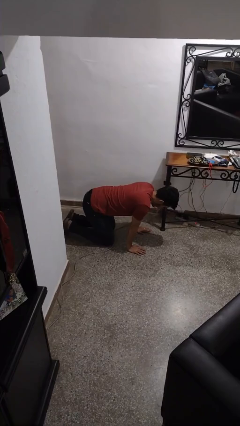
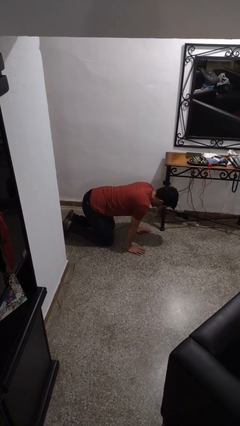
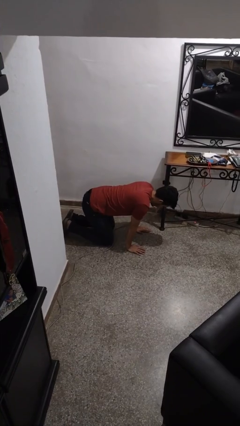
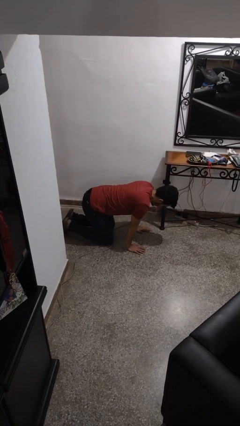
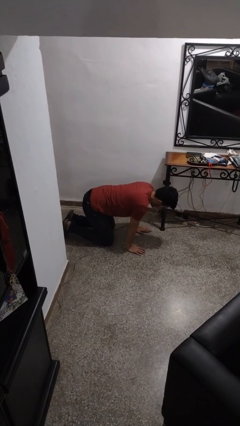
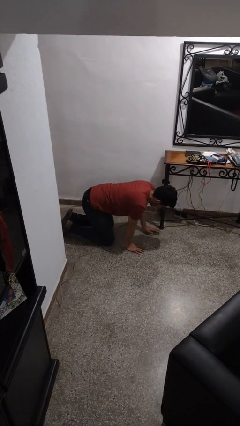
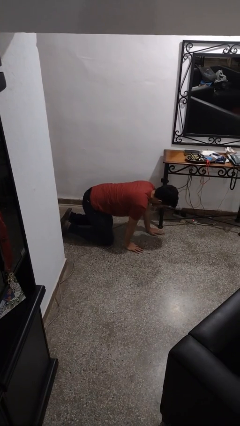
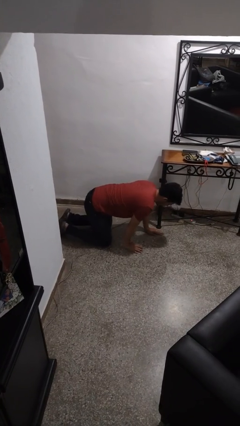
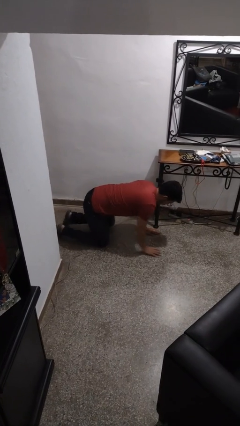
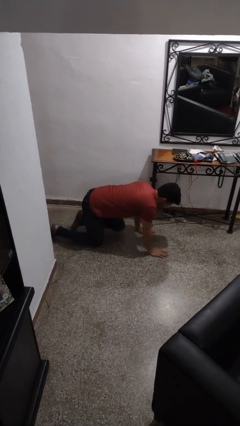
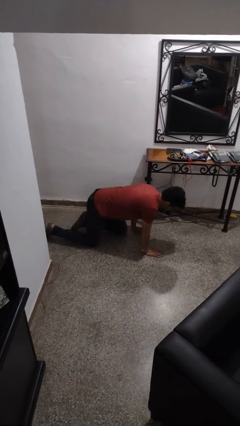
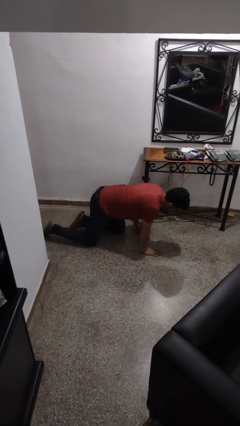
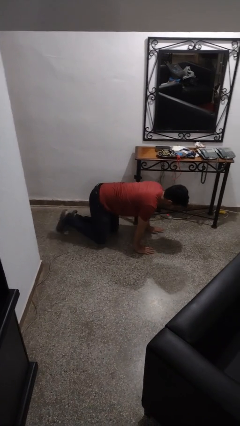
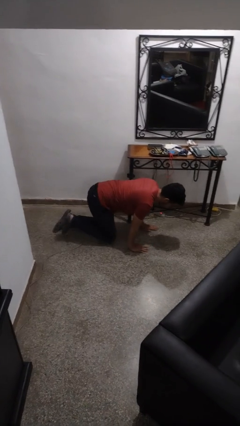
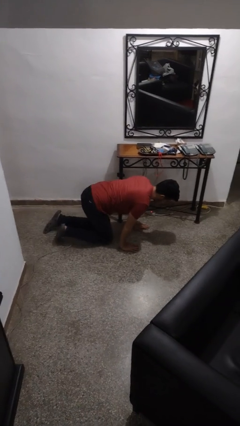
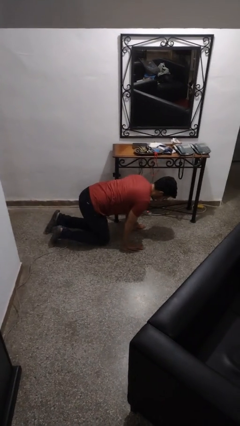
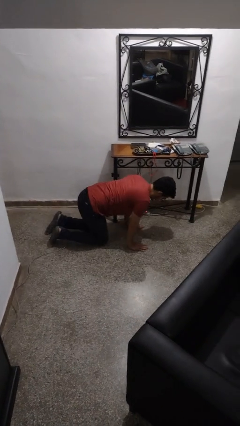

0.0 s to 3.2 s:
person crawls

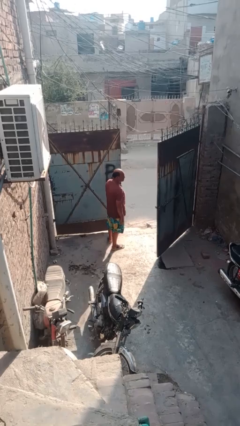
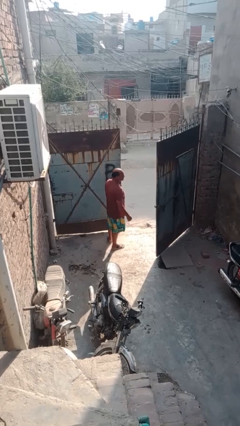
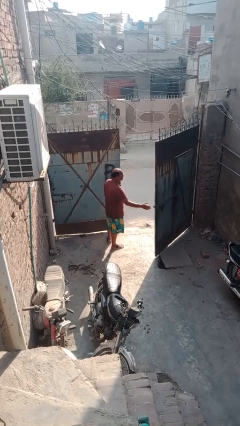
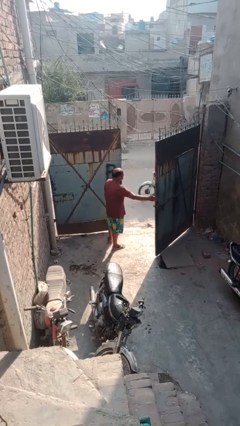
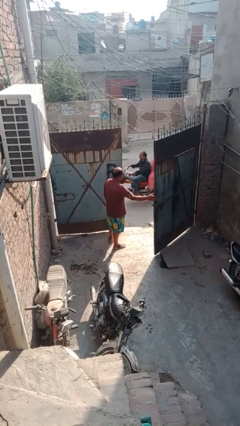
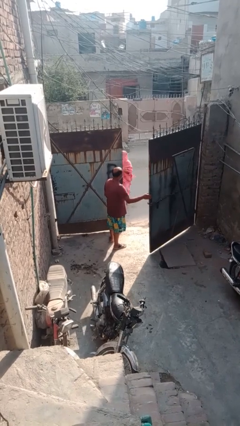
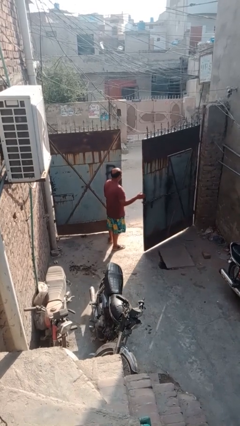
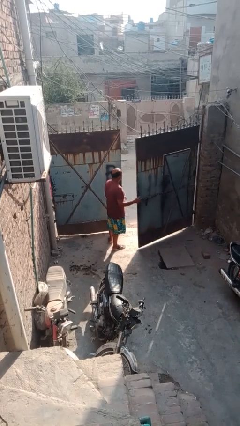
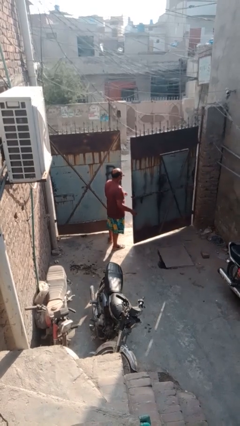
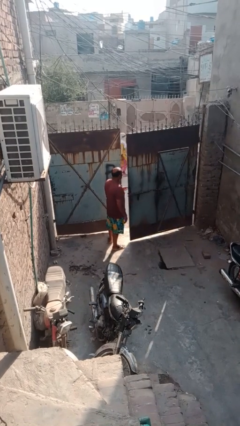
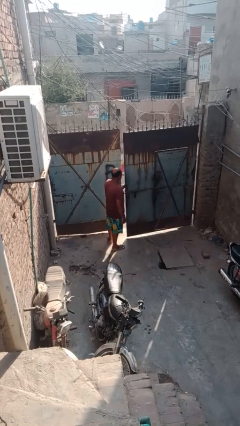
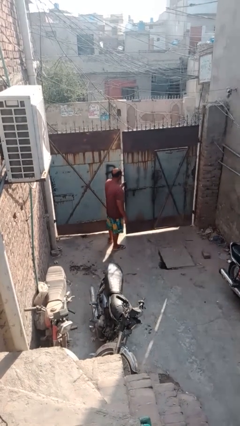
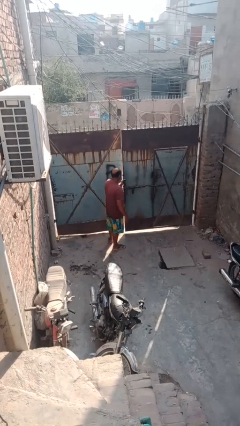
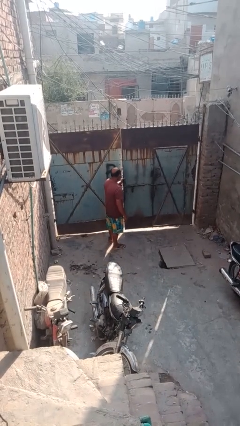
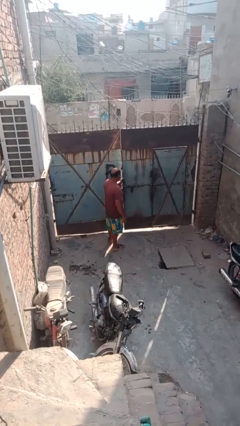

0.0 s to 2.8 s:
person closes gate

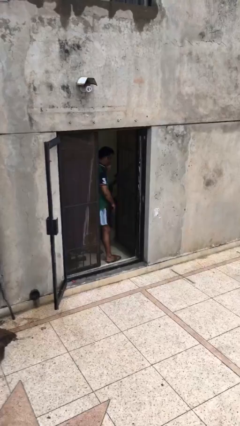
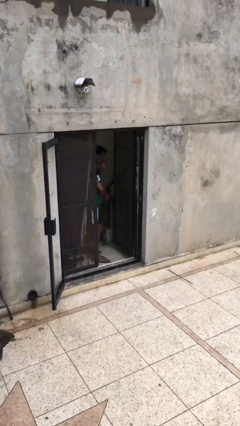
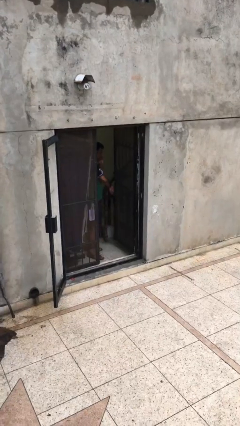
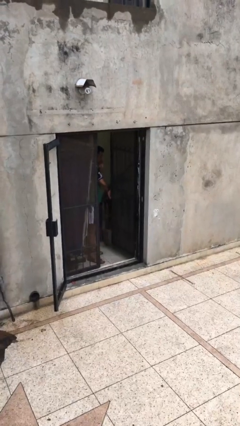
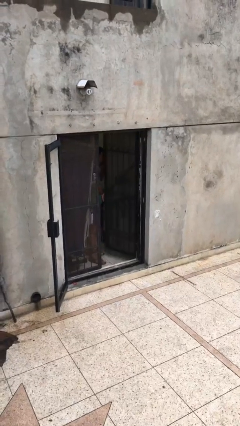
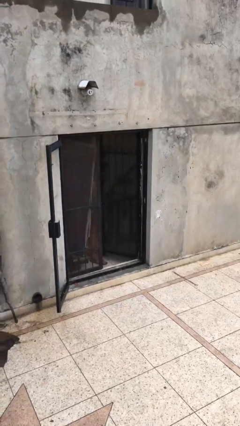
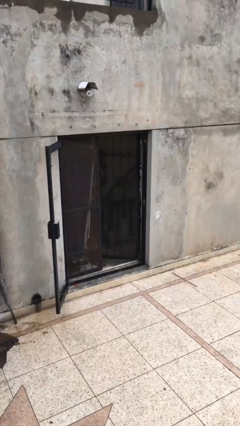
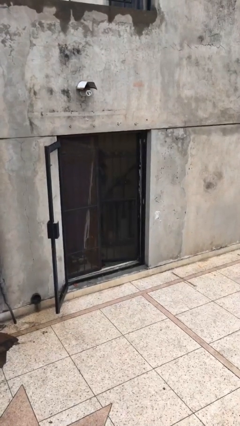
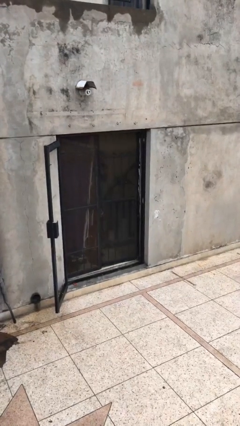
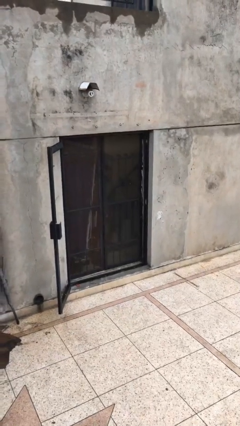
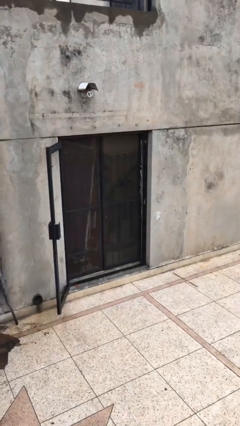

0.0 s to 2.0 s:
person closes facility door

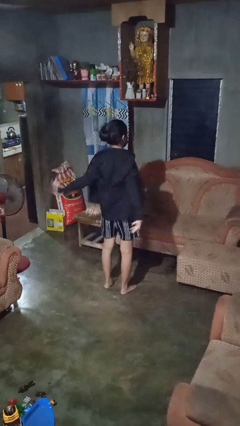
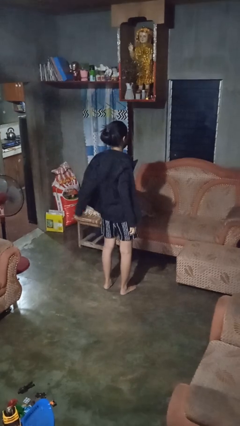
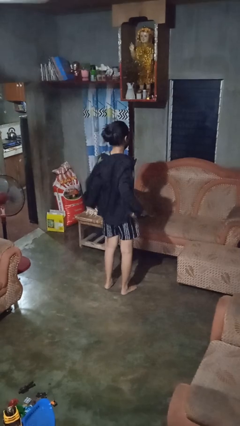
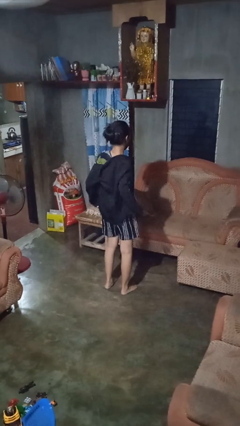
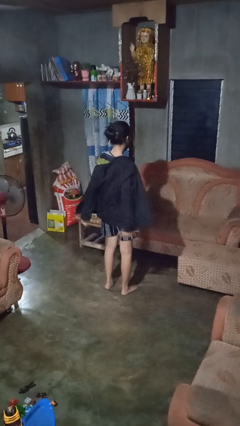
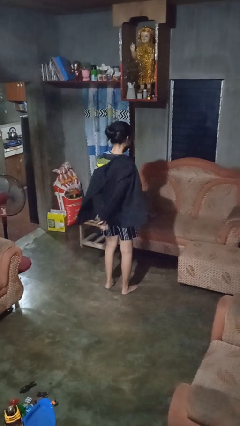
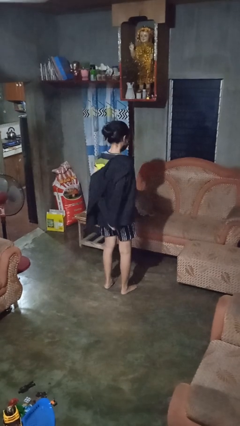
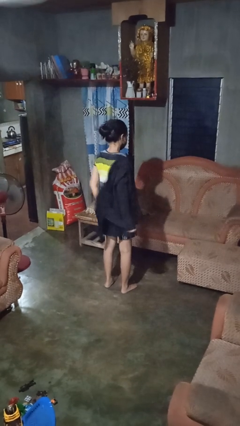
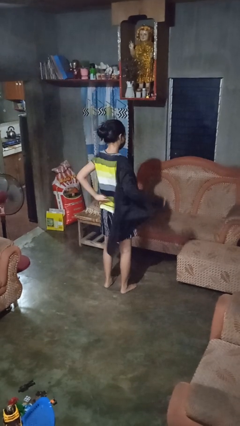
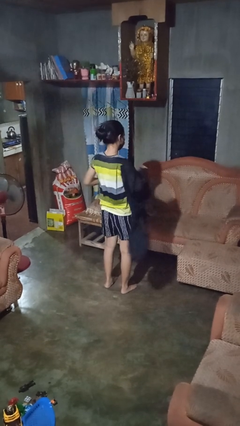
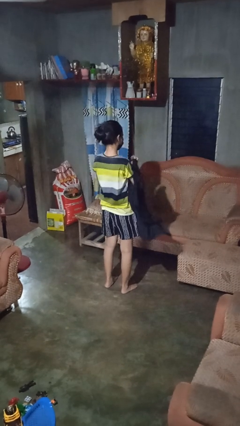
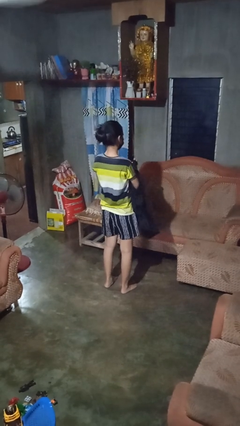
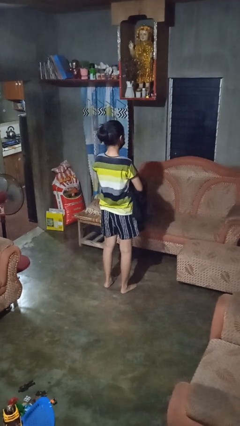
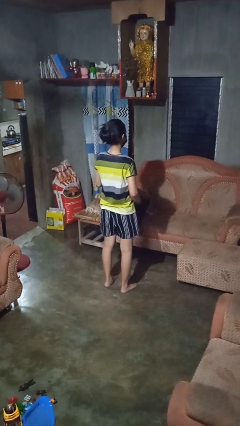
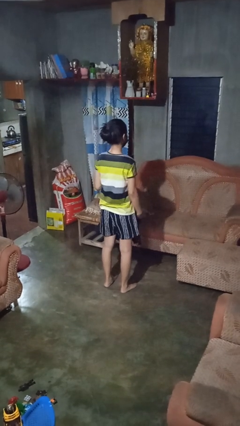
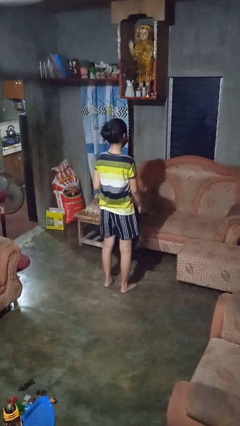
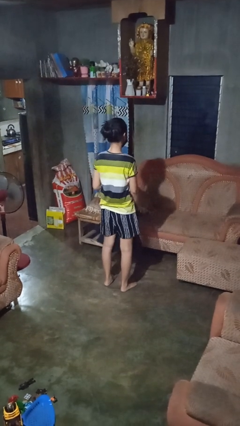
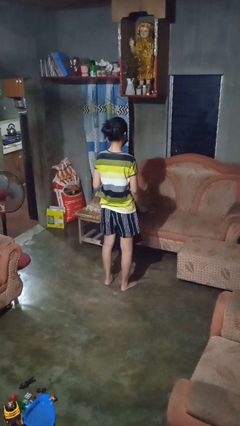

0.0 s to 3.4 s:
person takes off shirt

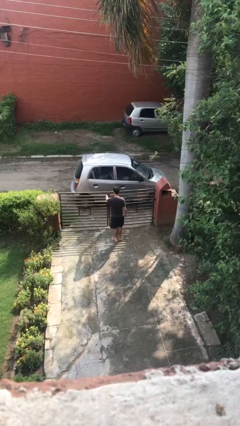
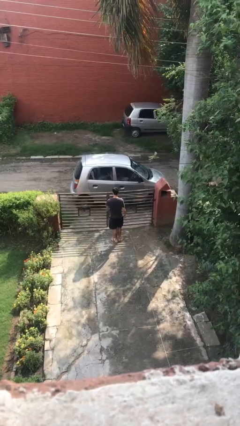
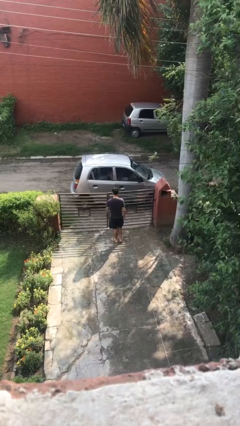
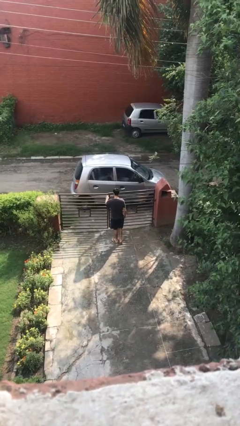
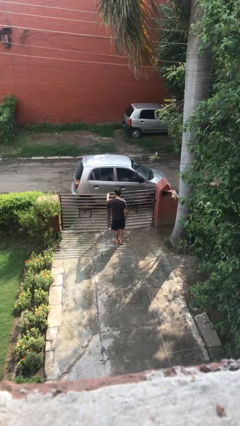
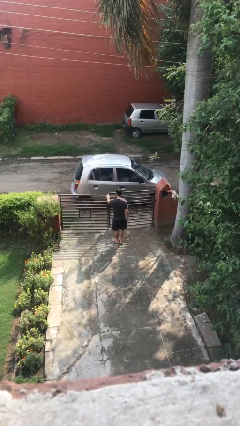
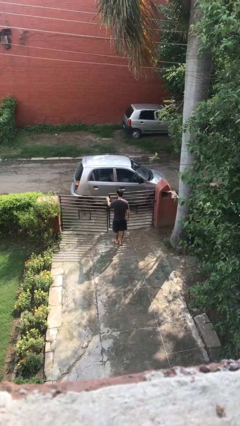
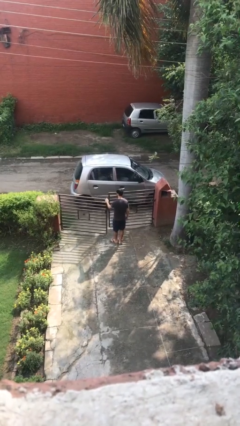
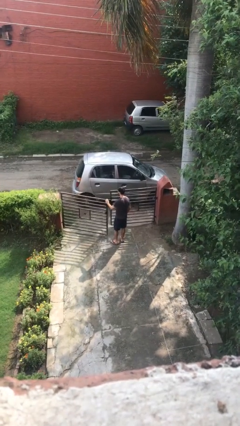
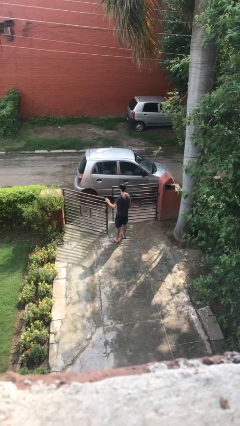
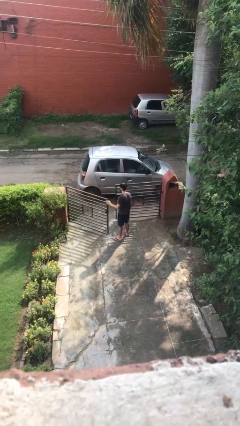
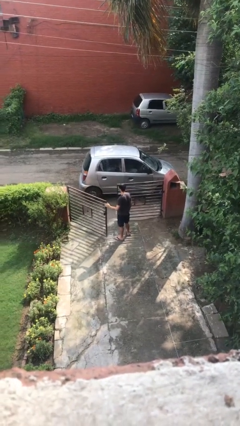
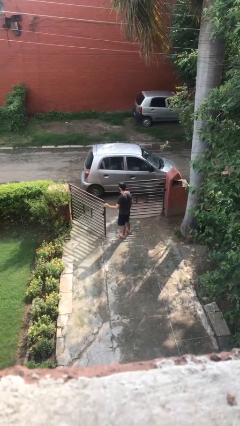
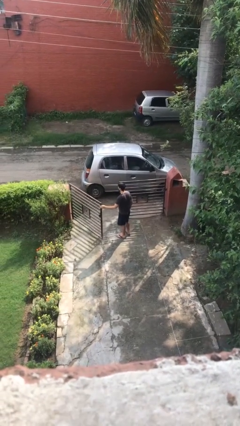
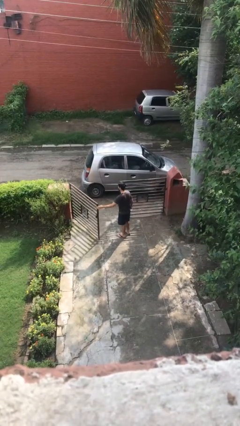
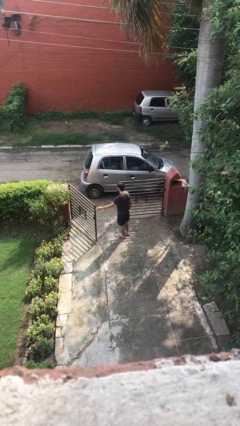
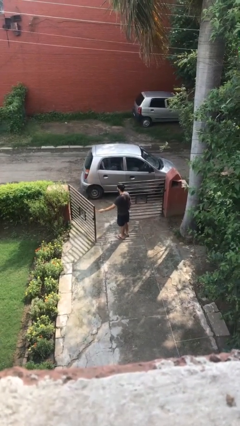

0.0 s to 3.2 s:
person opens gate

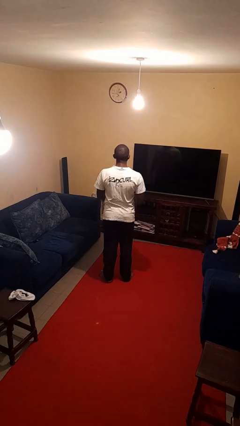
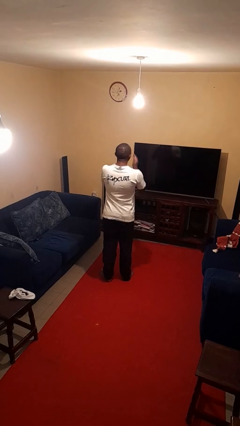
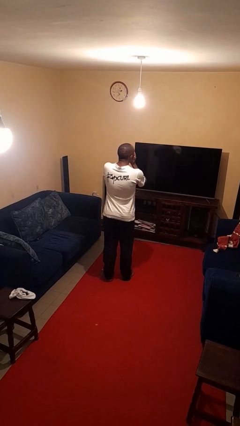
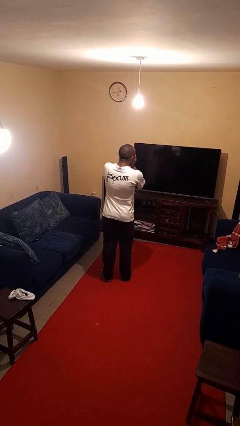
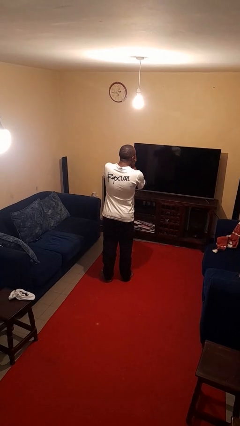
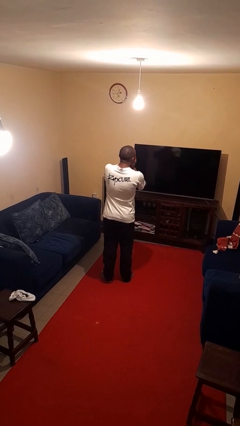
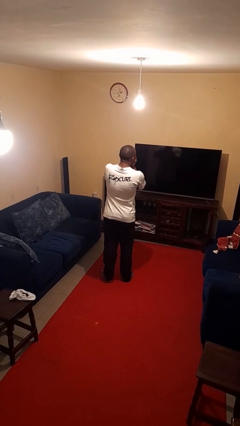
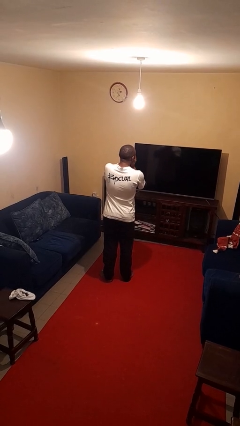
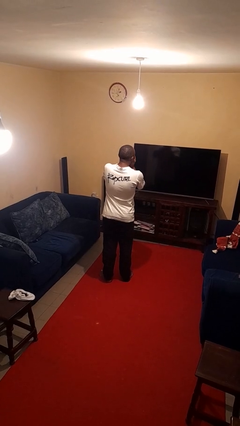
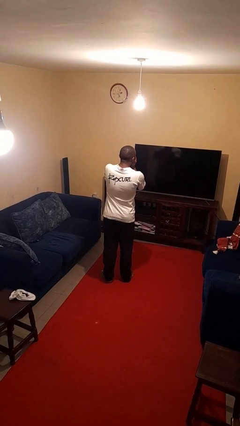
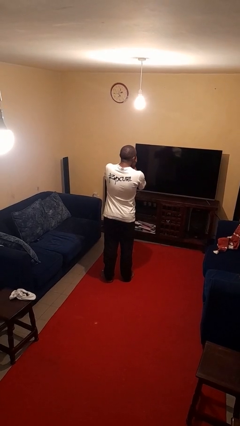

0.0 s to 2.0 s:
person sneezes into hand

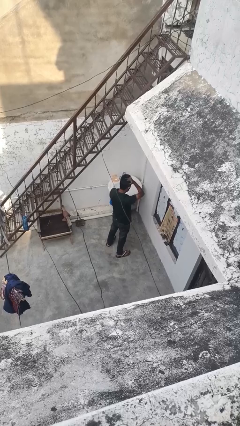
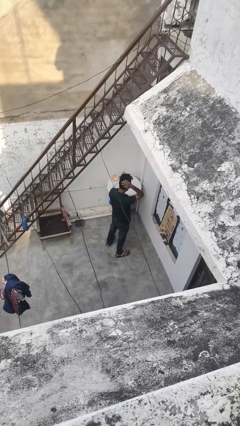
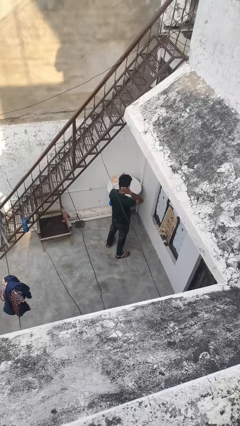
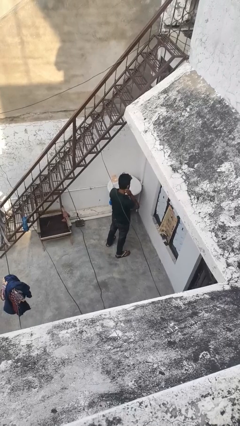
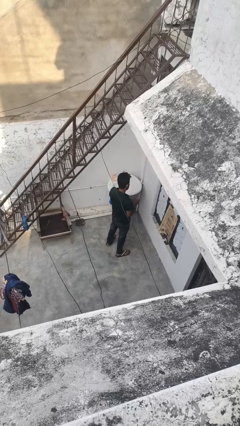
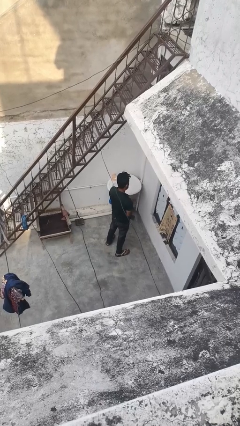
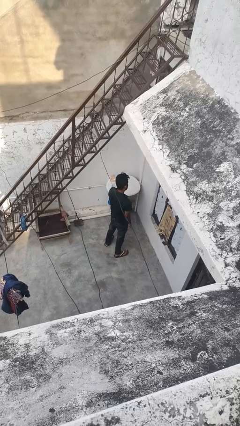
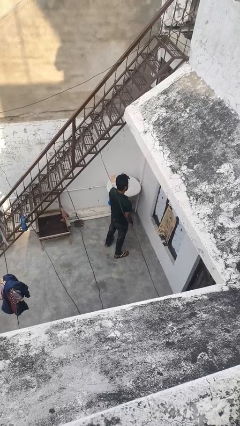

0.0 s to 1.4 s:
person strokes hair
